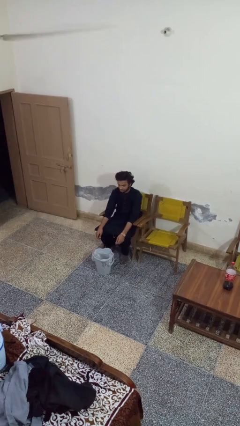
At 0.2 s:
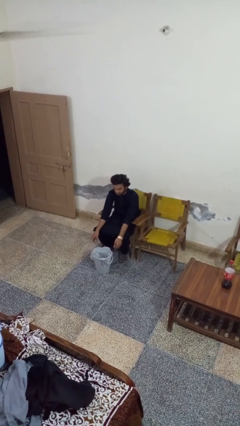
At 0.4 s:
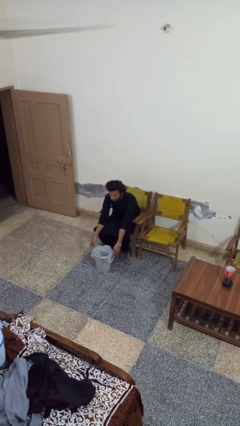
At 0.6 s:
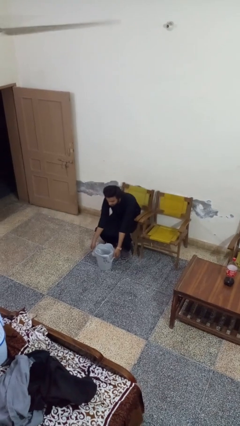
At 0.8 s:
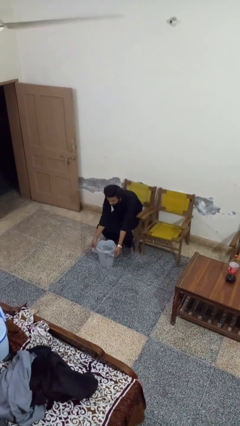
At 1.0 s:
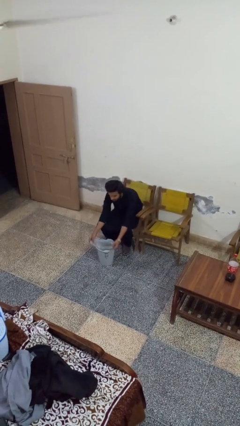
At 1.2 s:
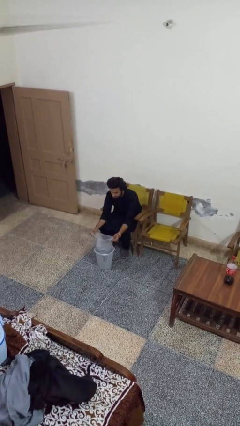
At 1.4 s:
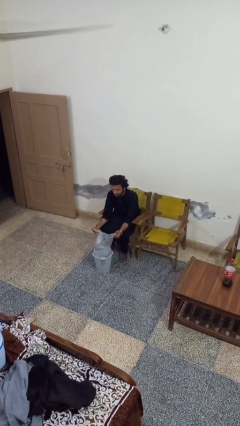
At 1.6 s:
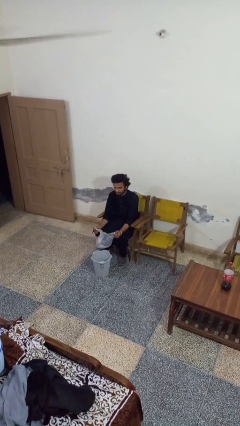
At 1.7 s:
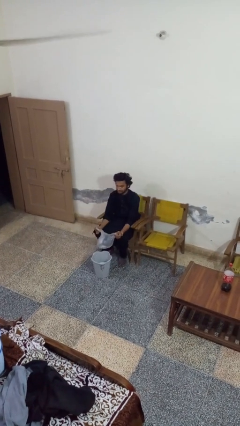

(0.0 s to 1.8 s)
person removes trashbag from trashcan

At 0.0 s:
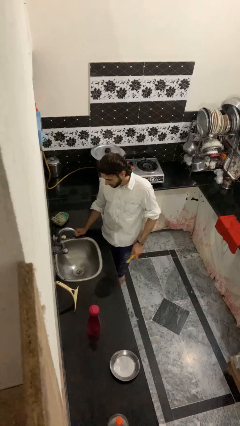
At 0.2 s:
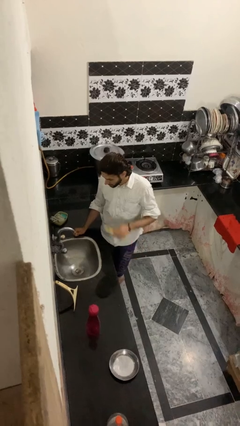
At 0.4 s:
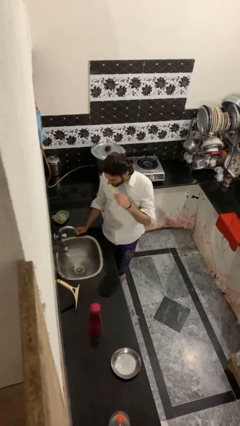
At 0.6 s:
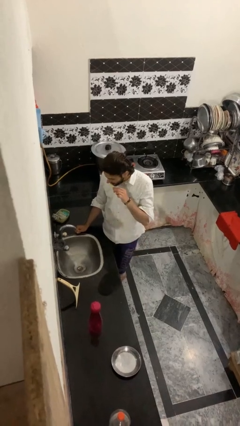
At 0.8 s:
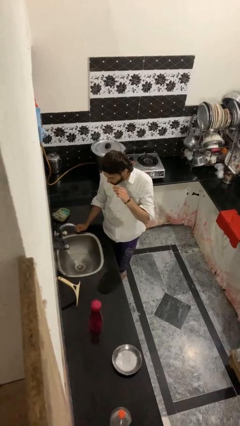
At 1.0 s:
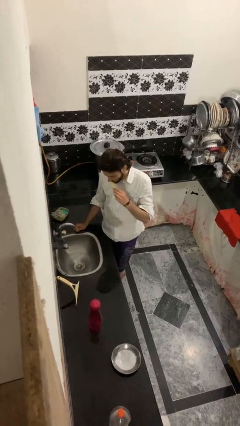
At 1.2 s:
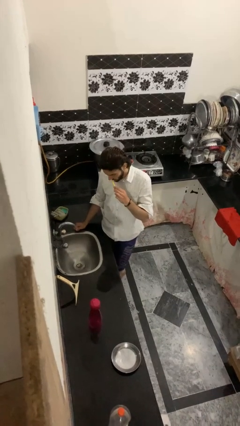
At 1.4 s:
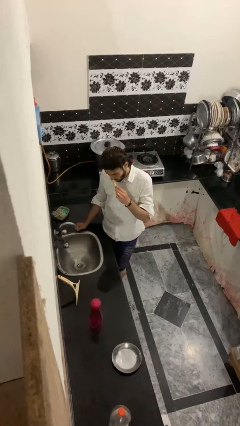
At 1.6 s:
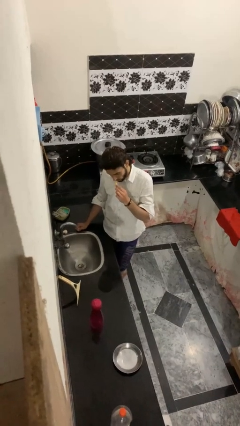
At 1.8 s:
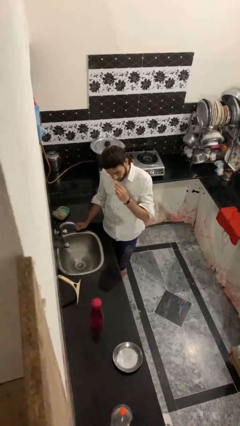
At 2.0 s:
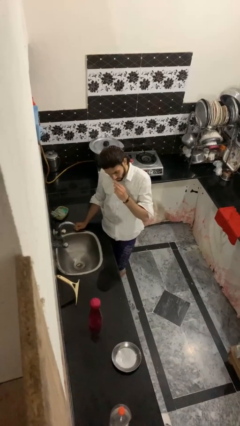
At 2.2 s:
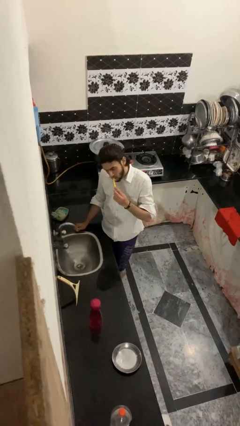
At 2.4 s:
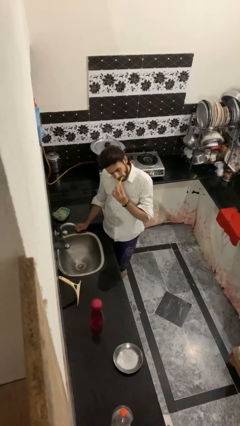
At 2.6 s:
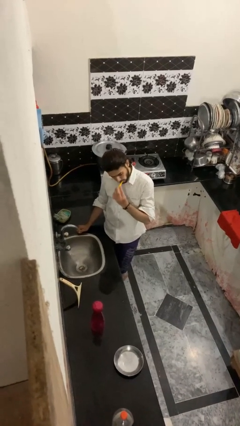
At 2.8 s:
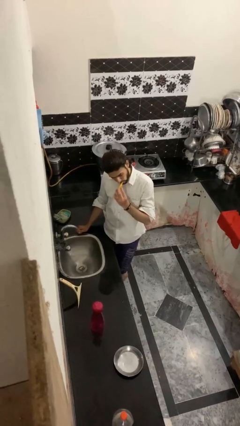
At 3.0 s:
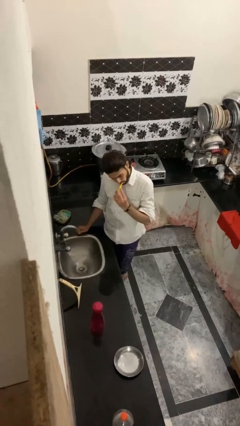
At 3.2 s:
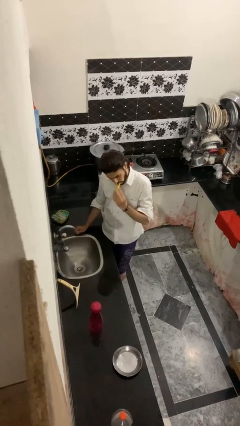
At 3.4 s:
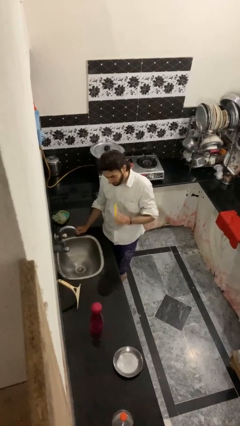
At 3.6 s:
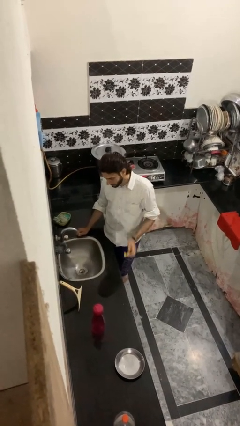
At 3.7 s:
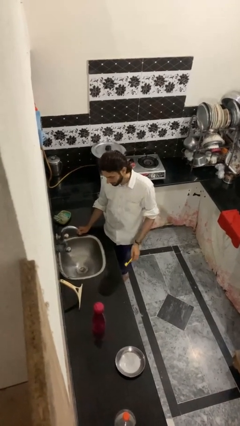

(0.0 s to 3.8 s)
person brushes teeth

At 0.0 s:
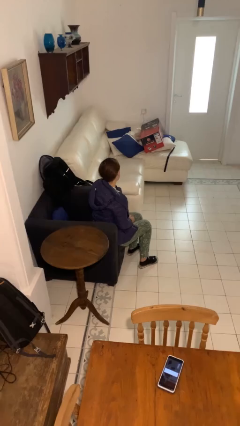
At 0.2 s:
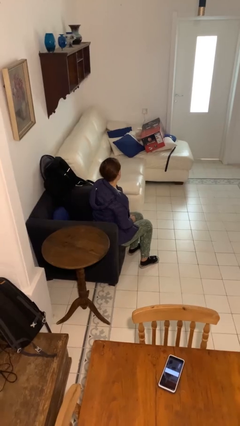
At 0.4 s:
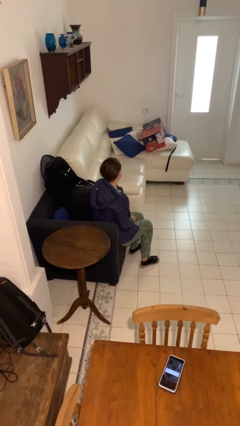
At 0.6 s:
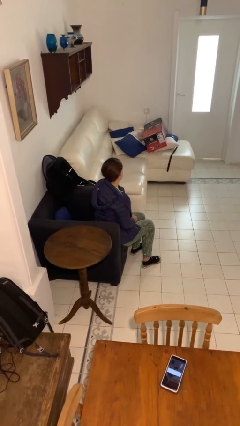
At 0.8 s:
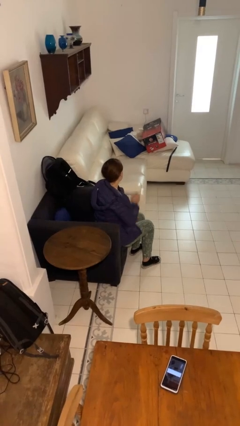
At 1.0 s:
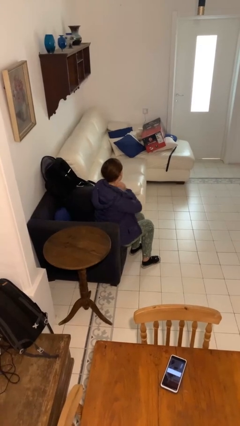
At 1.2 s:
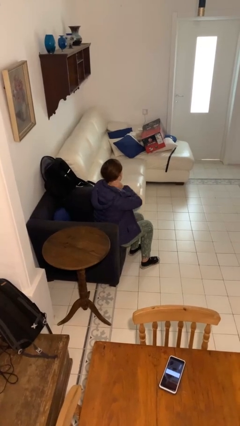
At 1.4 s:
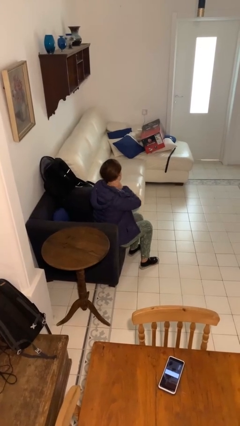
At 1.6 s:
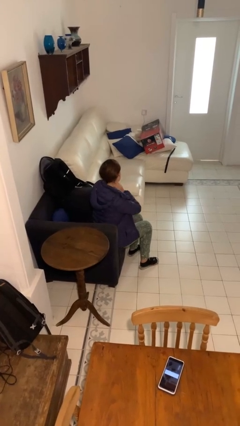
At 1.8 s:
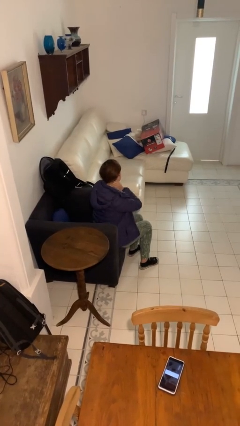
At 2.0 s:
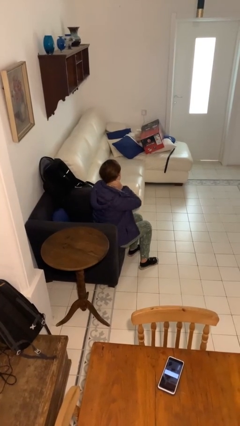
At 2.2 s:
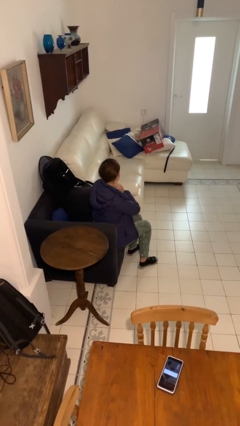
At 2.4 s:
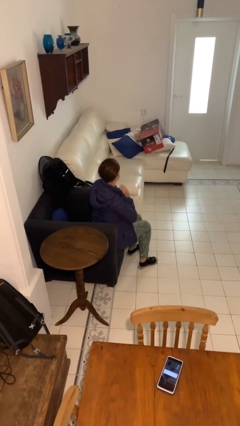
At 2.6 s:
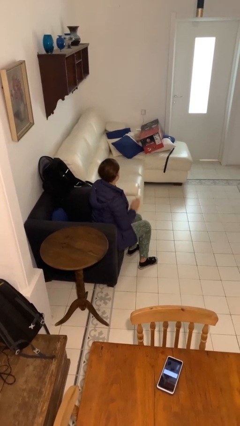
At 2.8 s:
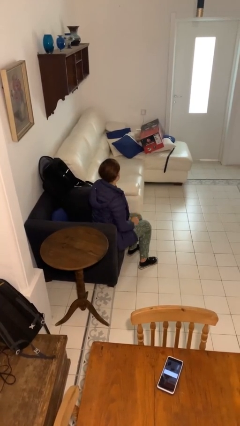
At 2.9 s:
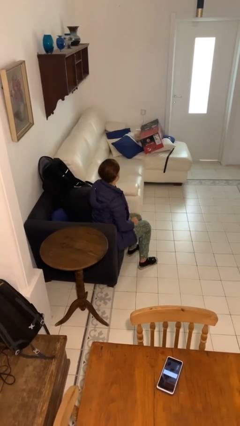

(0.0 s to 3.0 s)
person rubs neck

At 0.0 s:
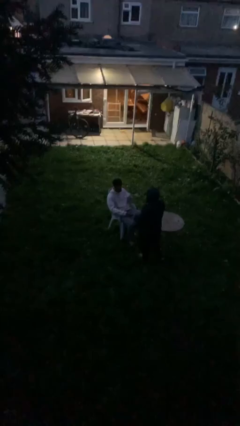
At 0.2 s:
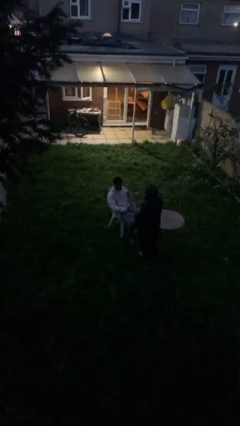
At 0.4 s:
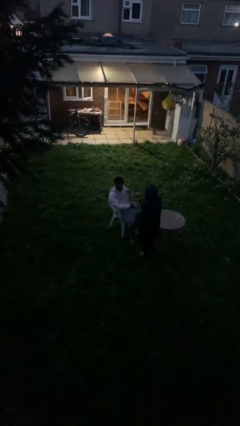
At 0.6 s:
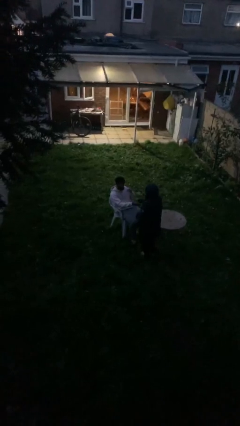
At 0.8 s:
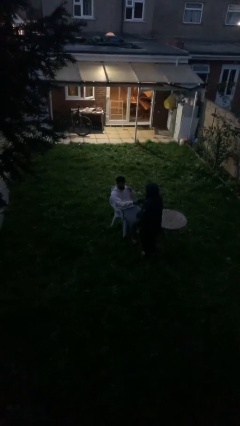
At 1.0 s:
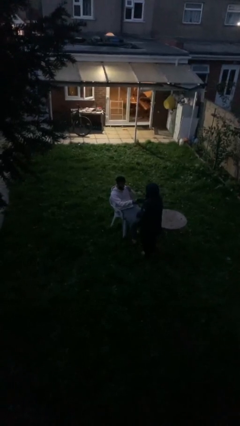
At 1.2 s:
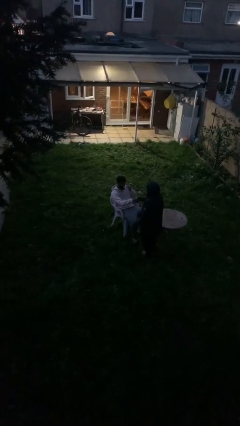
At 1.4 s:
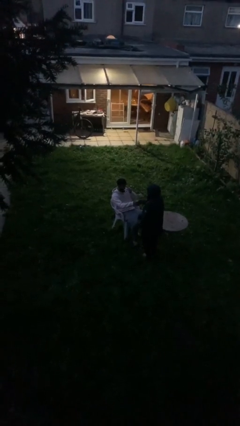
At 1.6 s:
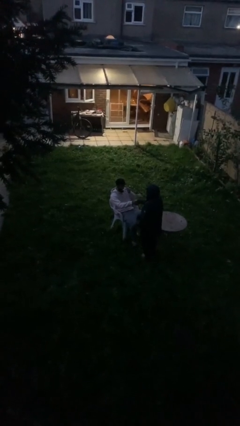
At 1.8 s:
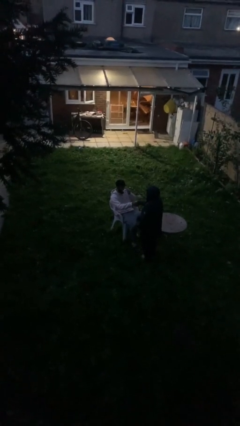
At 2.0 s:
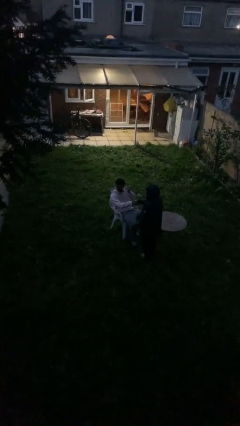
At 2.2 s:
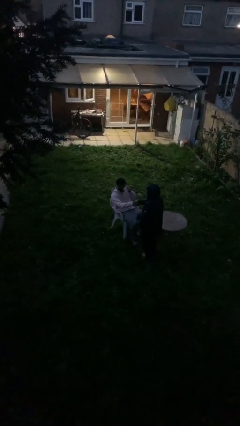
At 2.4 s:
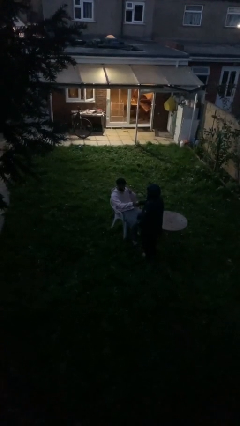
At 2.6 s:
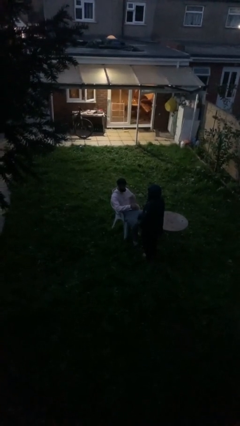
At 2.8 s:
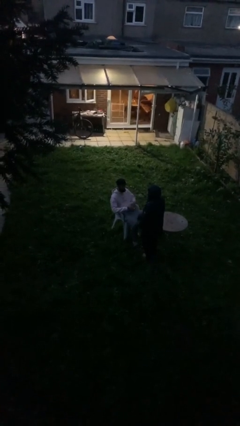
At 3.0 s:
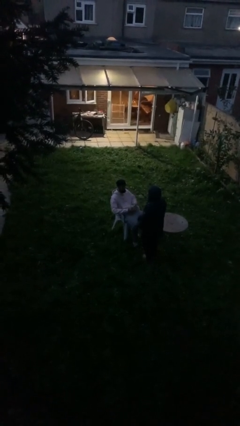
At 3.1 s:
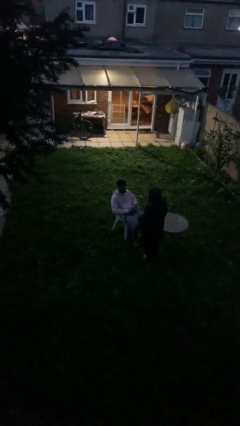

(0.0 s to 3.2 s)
person shakes hand

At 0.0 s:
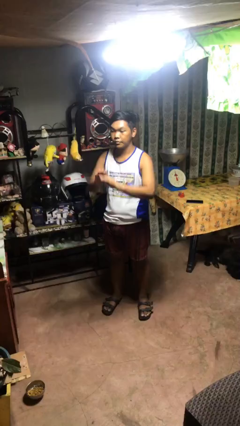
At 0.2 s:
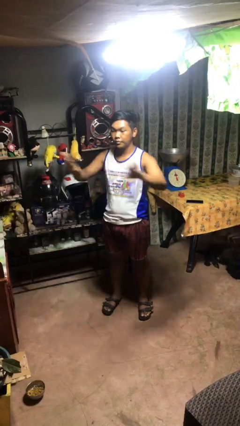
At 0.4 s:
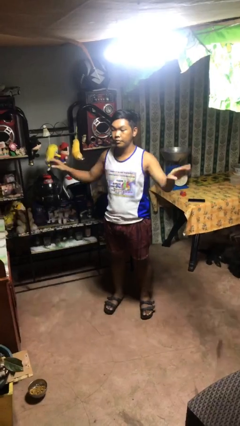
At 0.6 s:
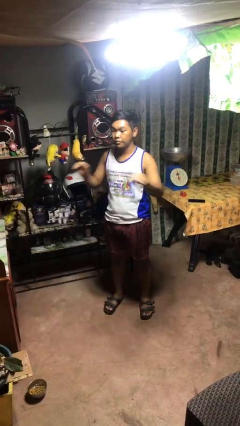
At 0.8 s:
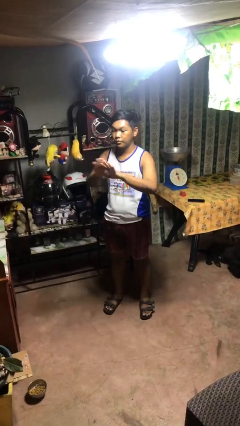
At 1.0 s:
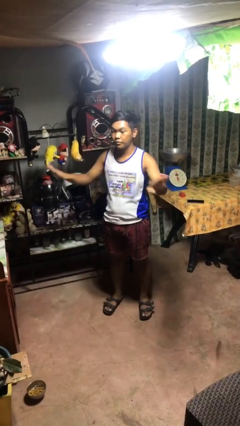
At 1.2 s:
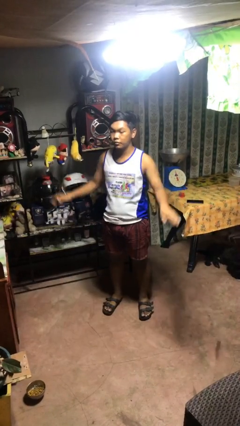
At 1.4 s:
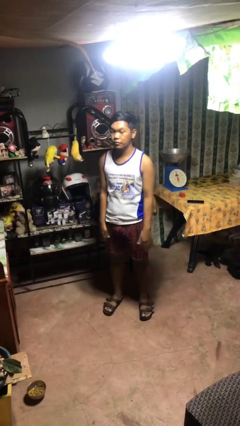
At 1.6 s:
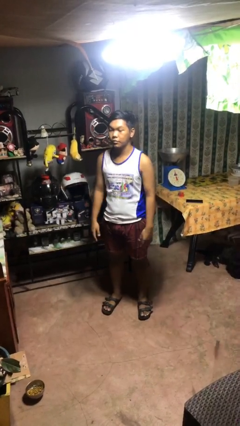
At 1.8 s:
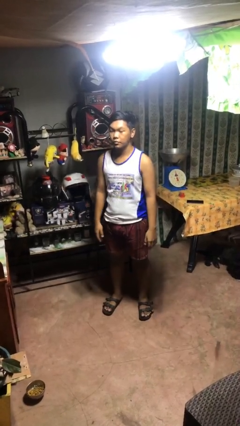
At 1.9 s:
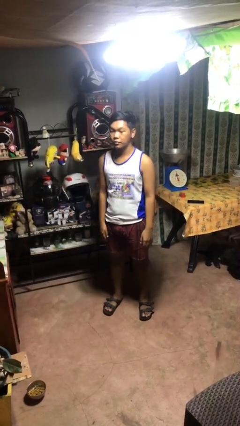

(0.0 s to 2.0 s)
person gestures zoom in

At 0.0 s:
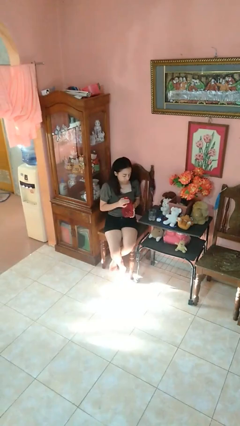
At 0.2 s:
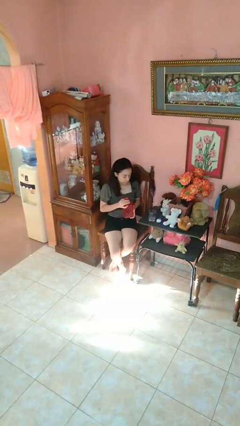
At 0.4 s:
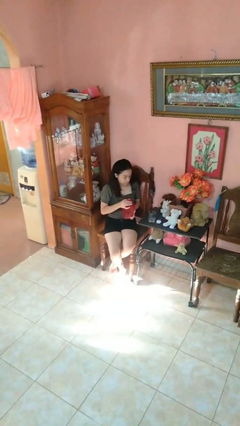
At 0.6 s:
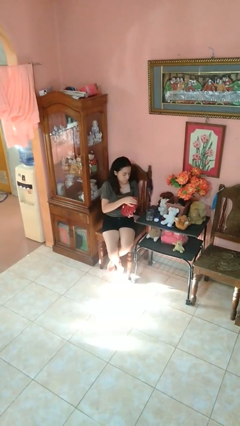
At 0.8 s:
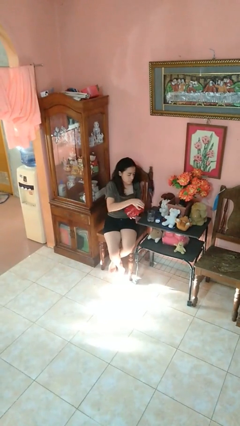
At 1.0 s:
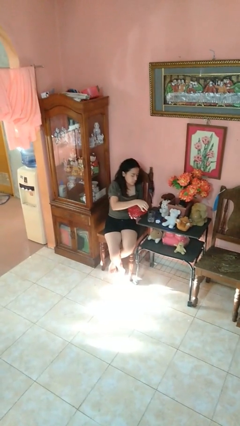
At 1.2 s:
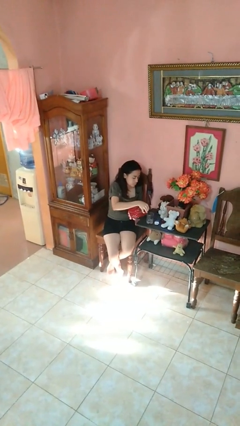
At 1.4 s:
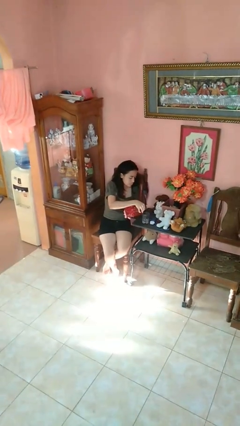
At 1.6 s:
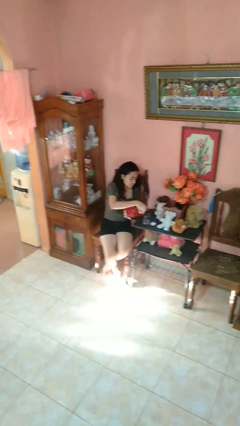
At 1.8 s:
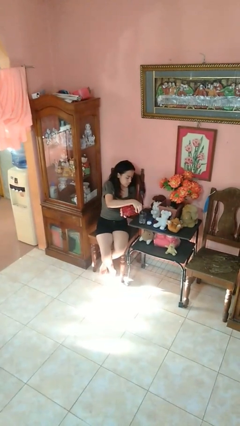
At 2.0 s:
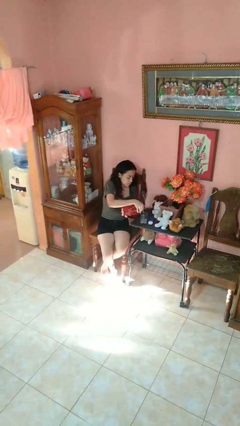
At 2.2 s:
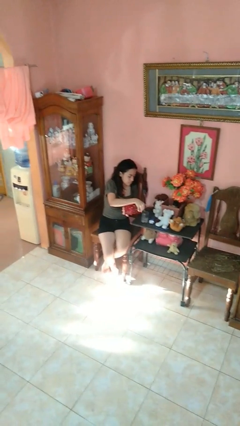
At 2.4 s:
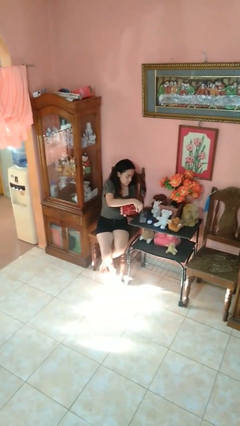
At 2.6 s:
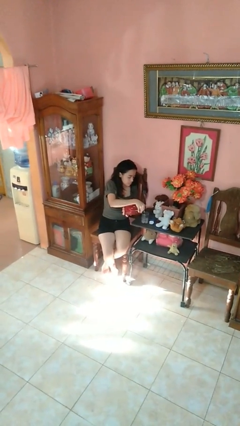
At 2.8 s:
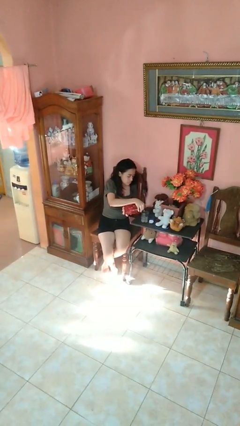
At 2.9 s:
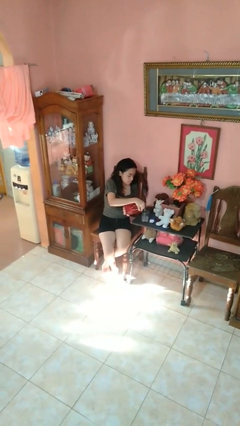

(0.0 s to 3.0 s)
person pours liquid into cup

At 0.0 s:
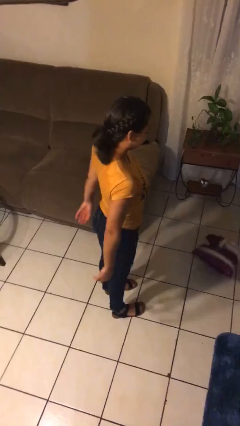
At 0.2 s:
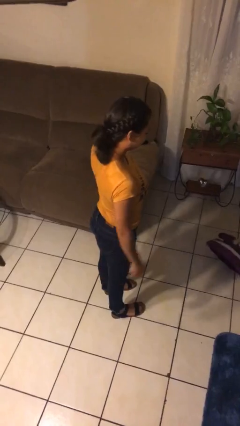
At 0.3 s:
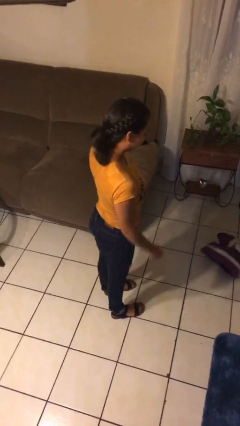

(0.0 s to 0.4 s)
person throws object to ground
